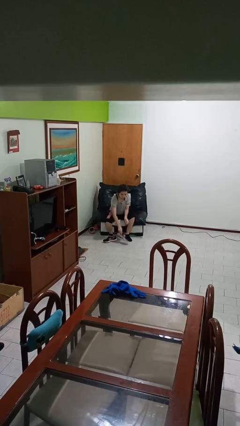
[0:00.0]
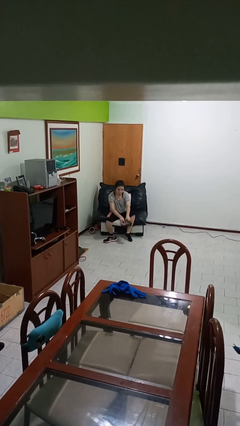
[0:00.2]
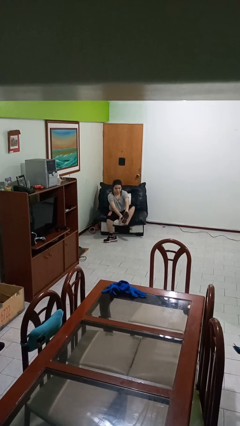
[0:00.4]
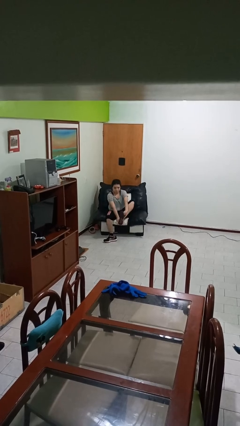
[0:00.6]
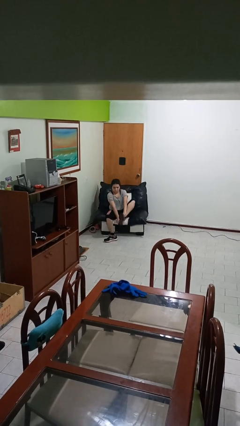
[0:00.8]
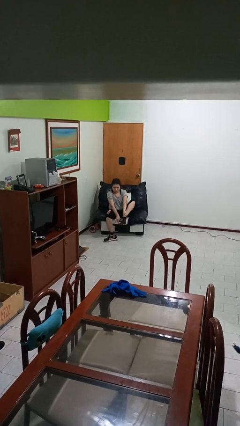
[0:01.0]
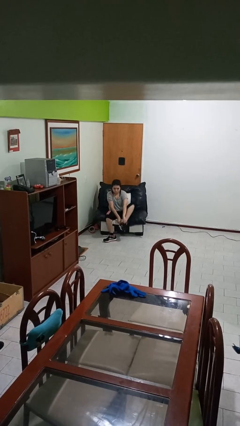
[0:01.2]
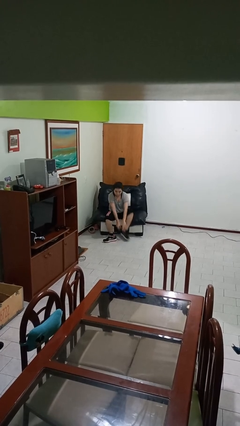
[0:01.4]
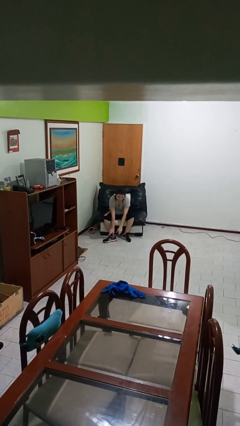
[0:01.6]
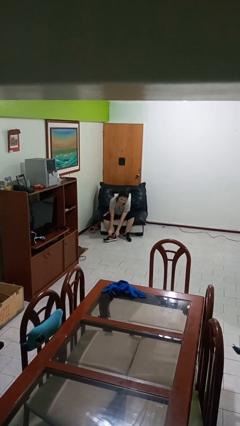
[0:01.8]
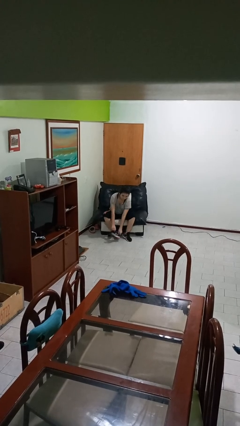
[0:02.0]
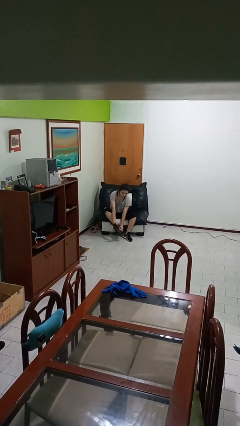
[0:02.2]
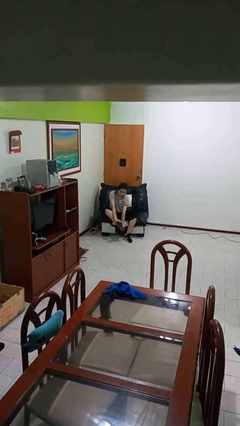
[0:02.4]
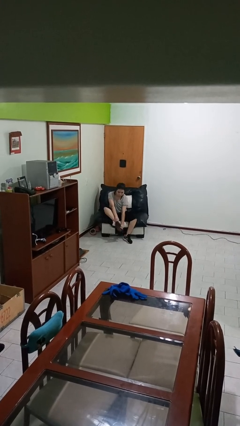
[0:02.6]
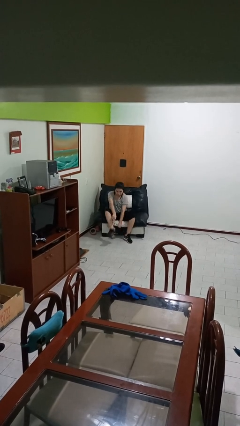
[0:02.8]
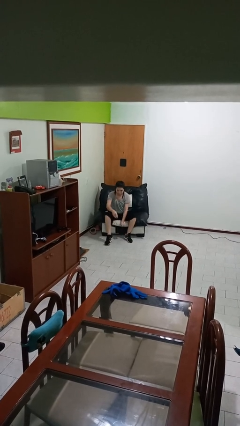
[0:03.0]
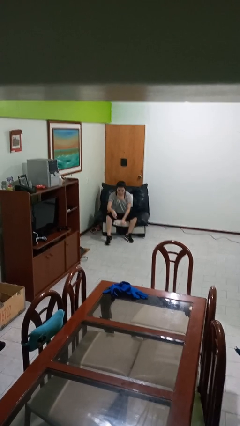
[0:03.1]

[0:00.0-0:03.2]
person puts on shoes

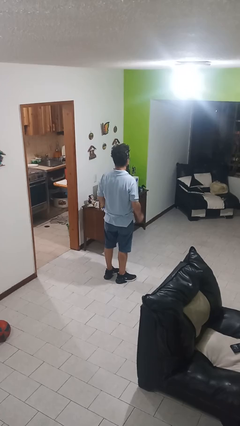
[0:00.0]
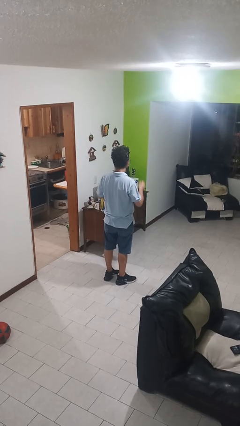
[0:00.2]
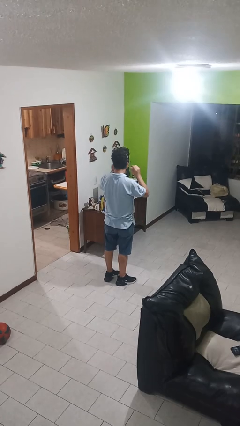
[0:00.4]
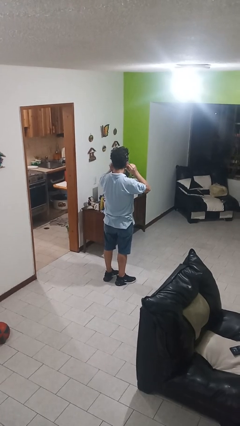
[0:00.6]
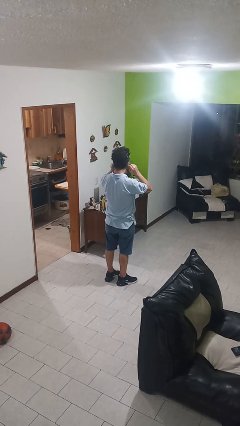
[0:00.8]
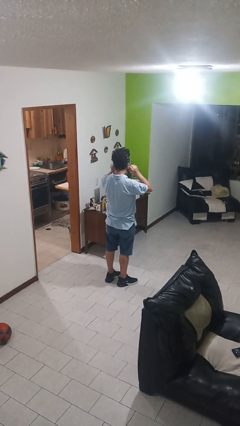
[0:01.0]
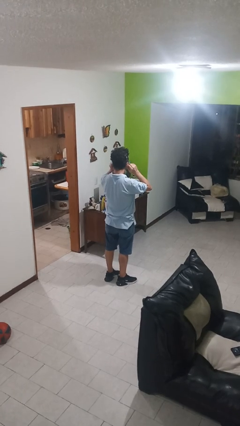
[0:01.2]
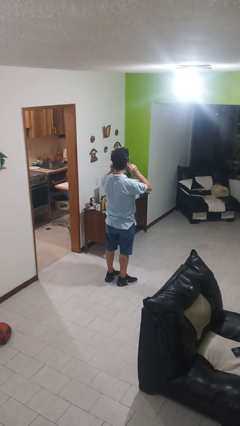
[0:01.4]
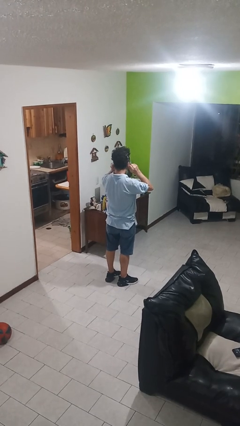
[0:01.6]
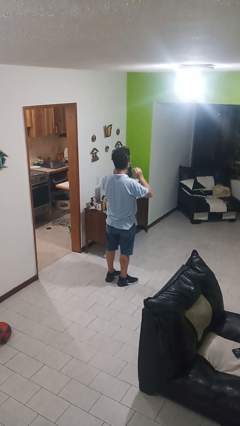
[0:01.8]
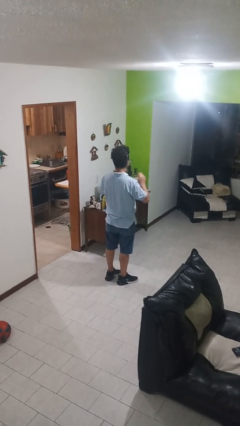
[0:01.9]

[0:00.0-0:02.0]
person touches earlobe

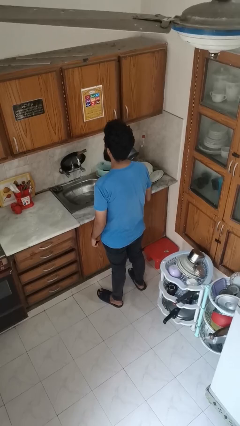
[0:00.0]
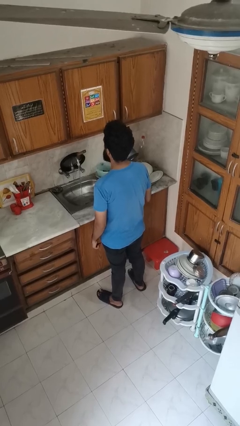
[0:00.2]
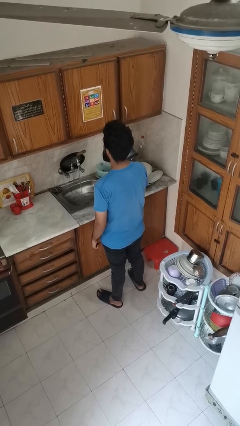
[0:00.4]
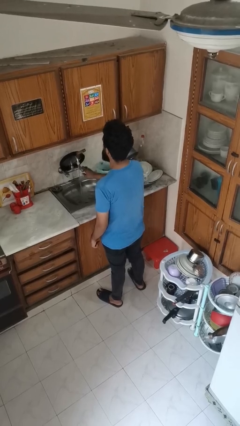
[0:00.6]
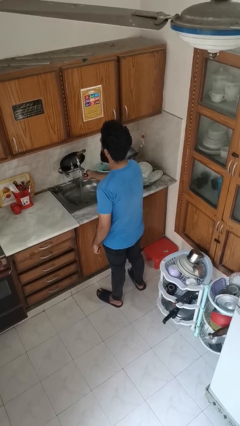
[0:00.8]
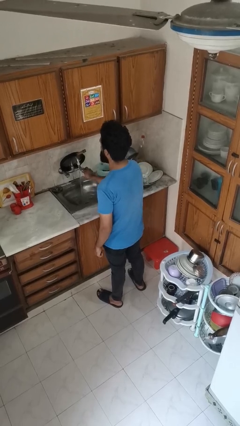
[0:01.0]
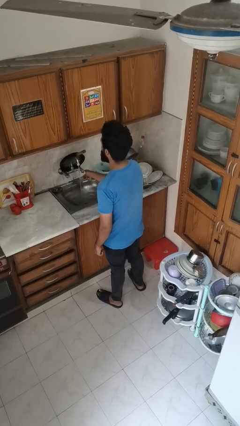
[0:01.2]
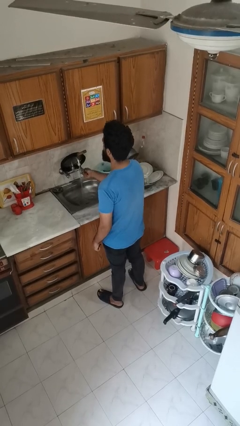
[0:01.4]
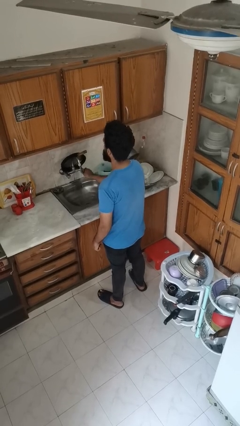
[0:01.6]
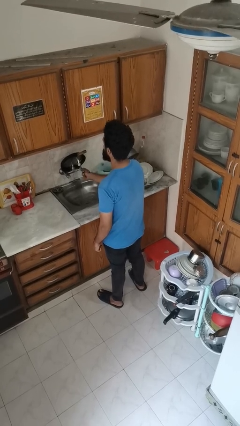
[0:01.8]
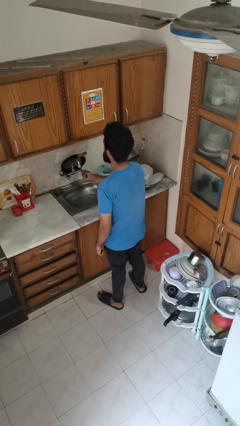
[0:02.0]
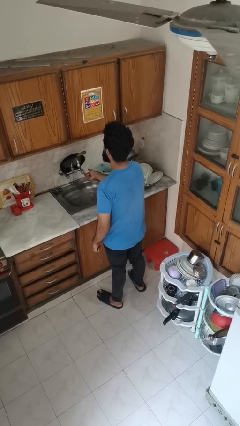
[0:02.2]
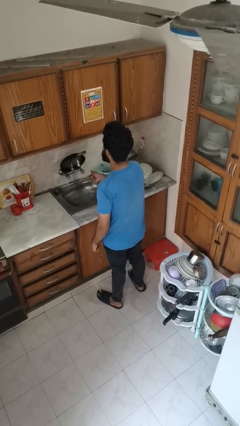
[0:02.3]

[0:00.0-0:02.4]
person turns off faucet

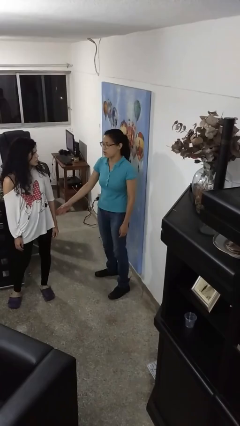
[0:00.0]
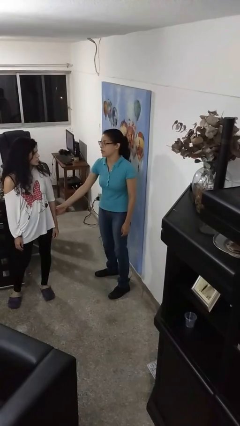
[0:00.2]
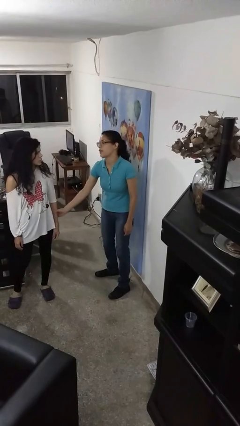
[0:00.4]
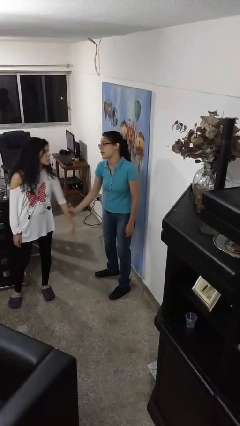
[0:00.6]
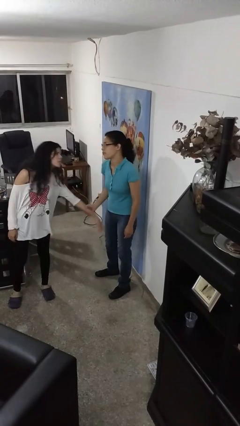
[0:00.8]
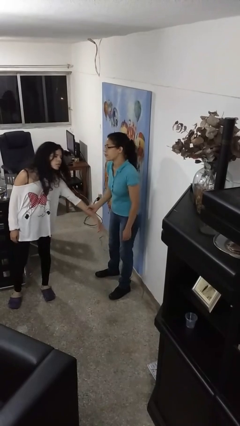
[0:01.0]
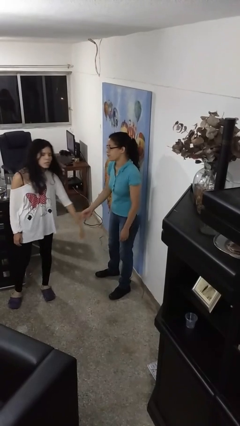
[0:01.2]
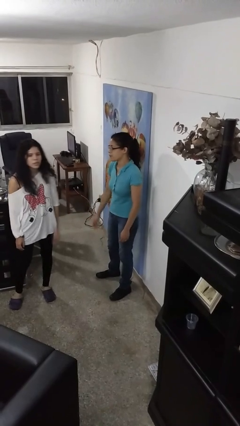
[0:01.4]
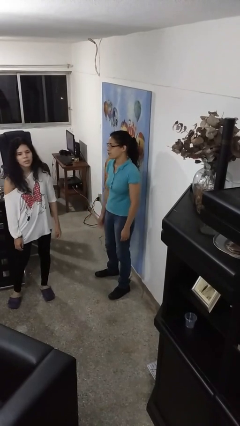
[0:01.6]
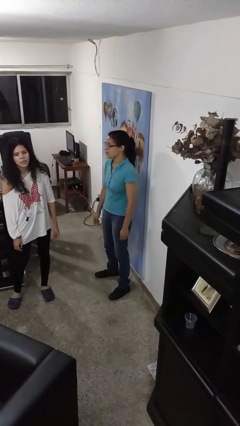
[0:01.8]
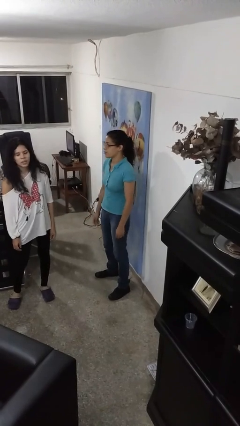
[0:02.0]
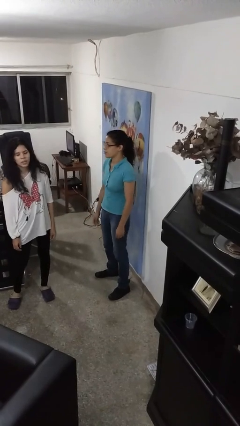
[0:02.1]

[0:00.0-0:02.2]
person grabs person by forearm

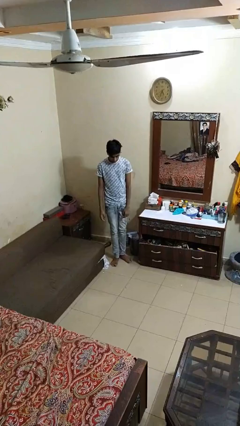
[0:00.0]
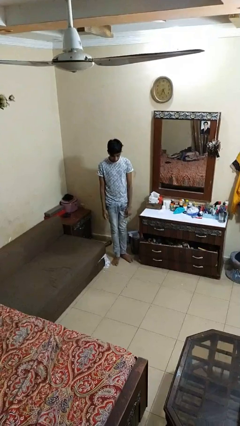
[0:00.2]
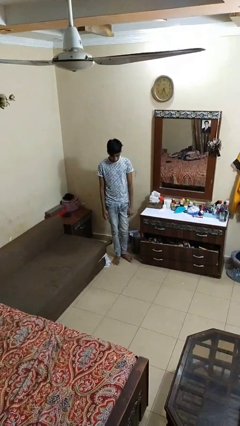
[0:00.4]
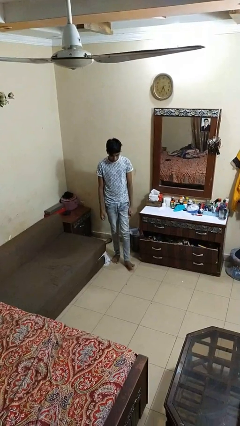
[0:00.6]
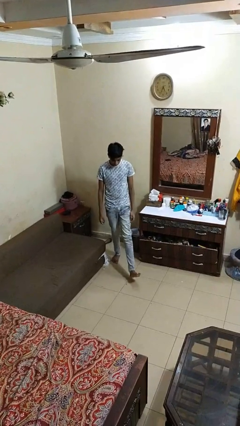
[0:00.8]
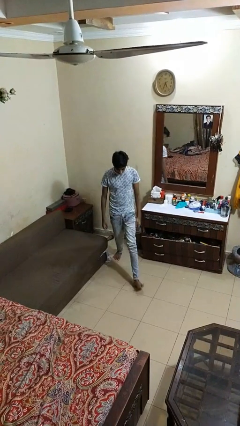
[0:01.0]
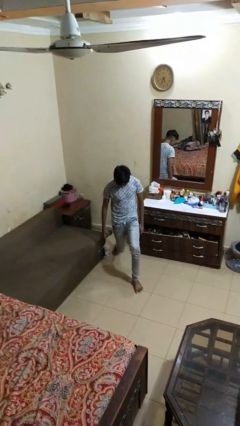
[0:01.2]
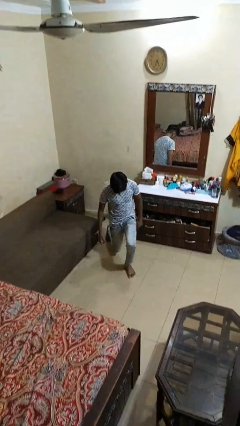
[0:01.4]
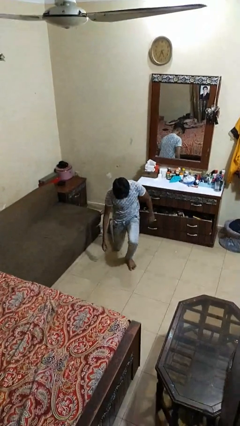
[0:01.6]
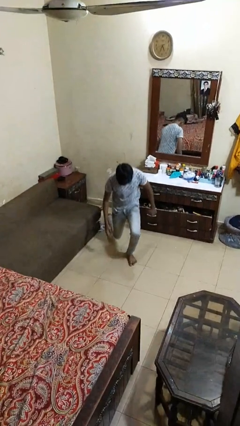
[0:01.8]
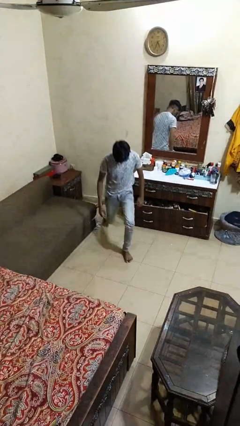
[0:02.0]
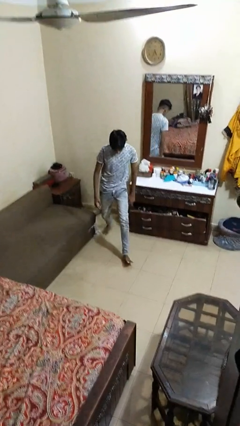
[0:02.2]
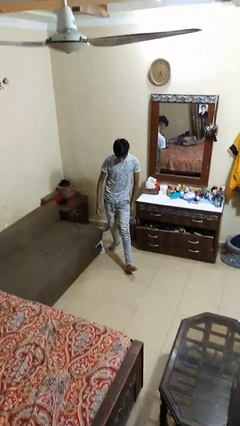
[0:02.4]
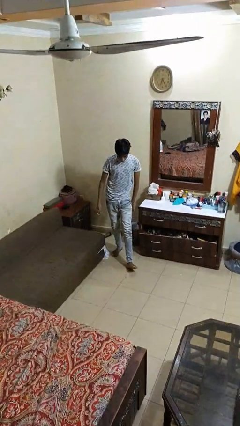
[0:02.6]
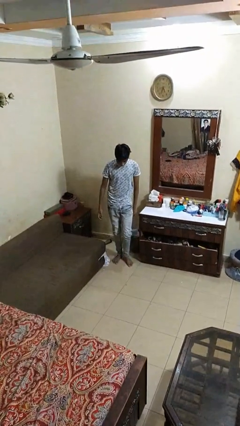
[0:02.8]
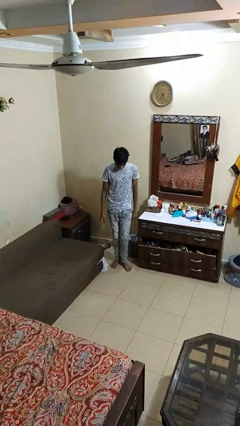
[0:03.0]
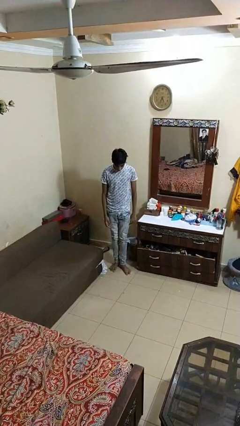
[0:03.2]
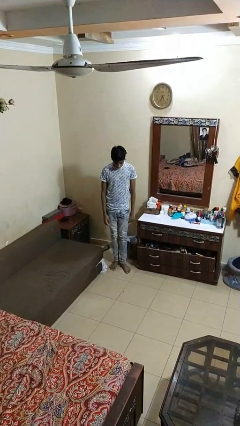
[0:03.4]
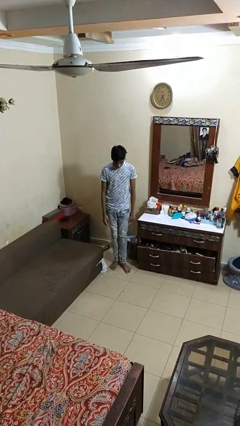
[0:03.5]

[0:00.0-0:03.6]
person exercises with lunges

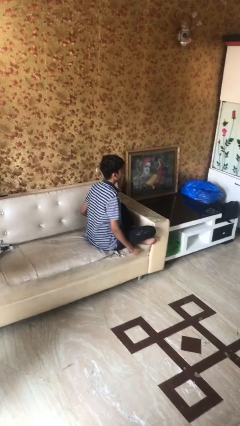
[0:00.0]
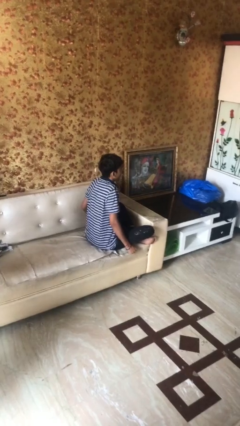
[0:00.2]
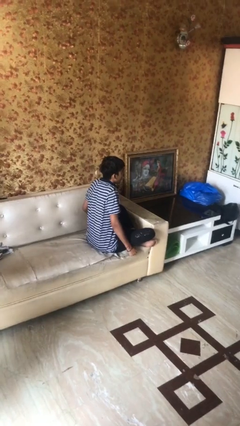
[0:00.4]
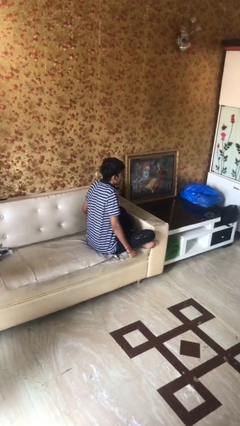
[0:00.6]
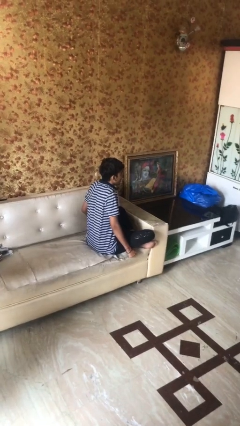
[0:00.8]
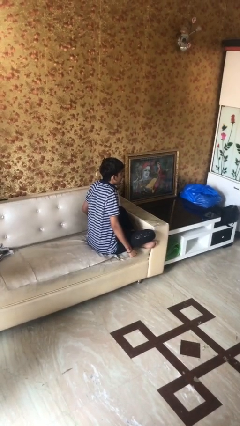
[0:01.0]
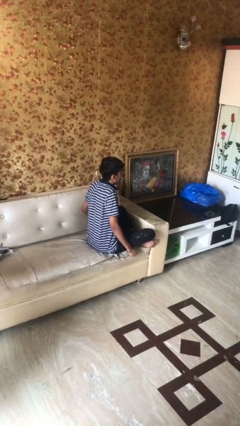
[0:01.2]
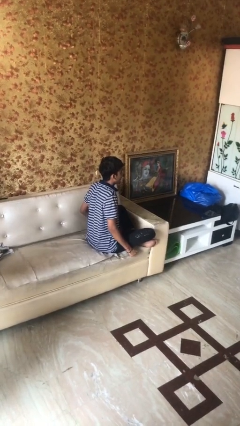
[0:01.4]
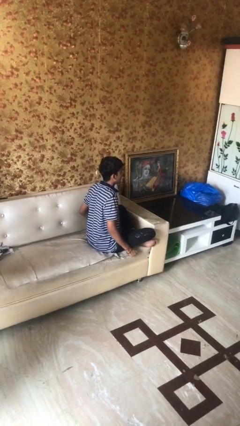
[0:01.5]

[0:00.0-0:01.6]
person shrugs

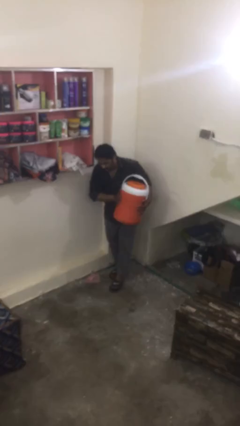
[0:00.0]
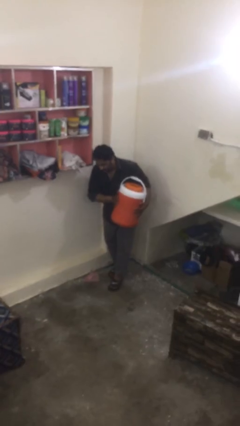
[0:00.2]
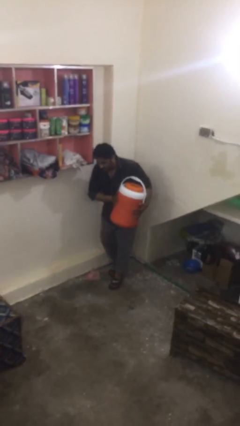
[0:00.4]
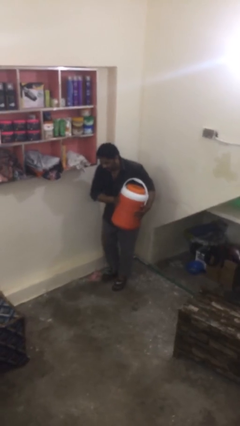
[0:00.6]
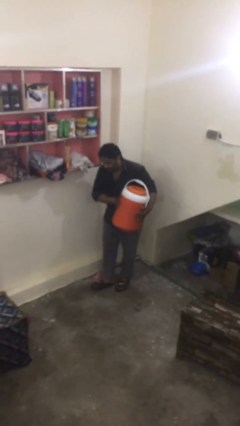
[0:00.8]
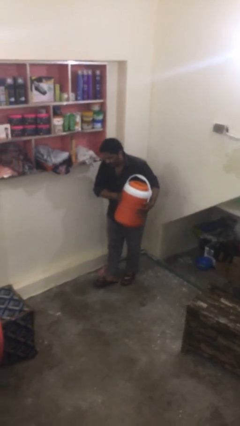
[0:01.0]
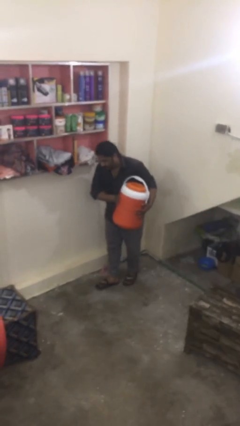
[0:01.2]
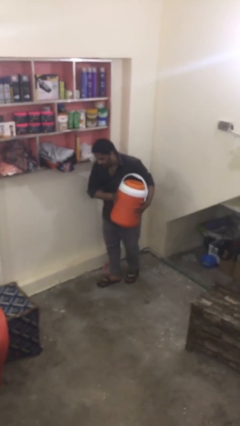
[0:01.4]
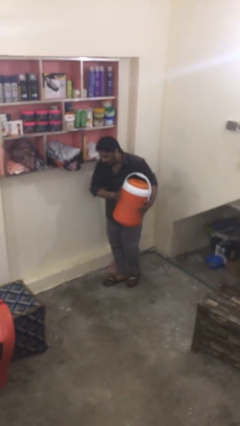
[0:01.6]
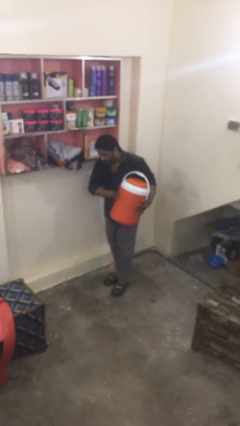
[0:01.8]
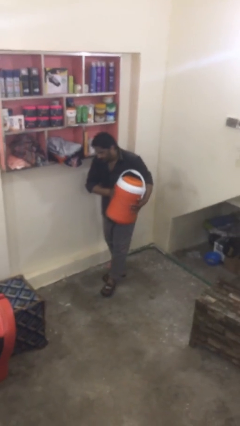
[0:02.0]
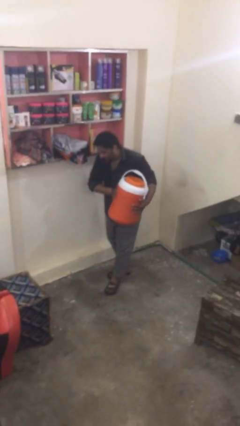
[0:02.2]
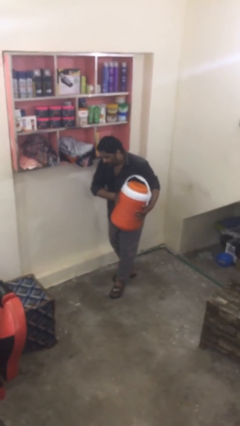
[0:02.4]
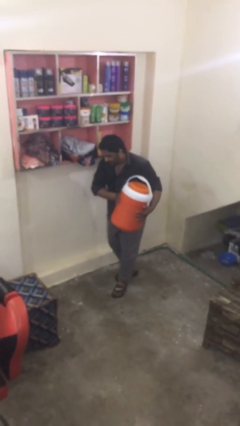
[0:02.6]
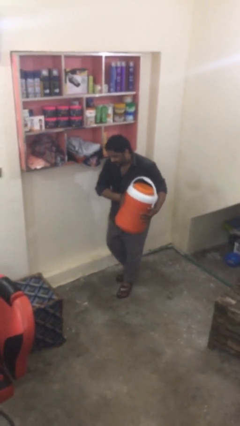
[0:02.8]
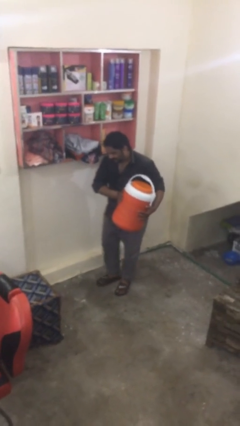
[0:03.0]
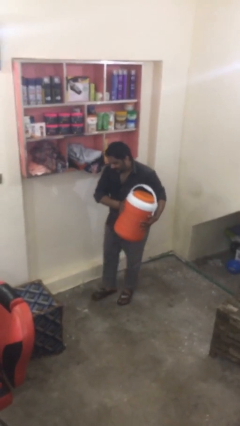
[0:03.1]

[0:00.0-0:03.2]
person carries heavy object
